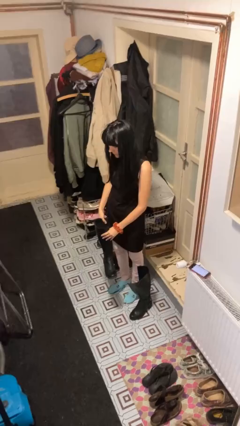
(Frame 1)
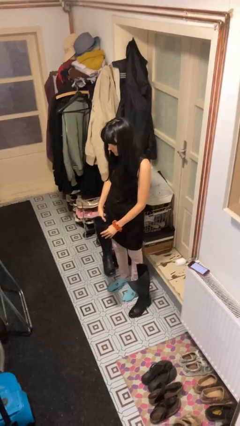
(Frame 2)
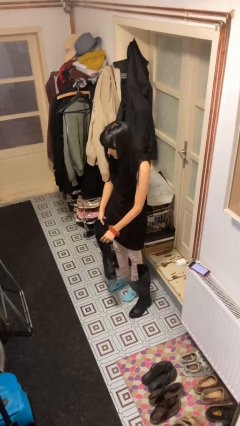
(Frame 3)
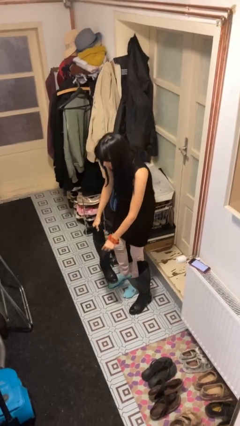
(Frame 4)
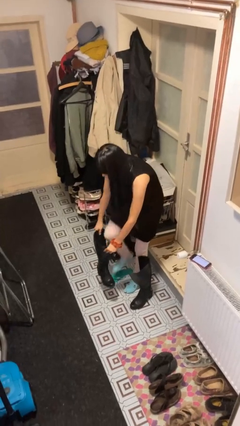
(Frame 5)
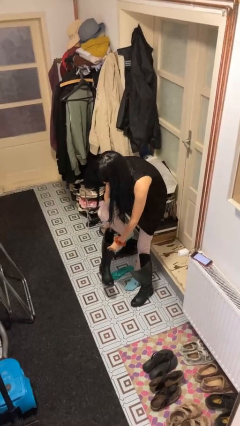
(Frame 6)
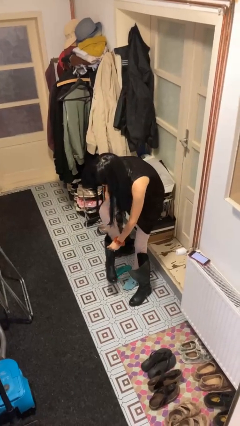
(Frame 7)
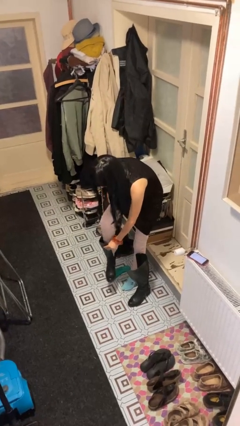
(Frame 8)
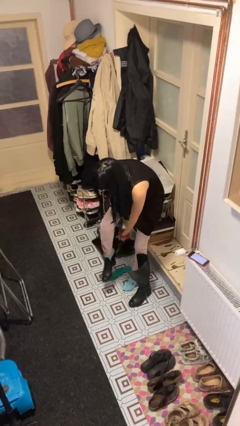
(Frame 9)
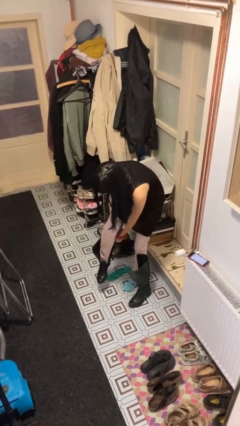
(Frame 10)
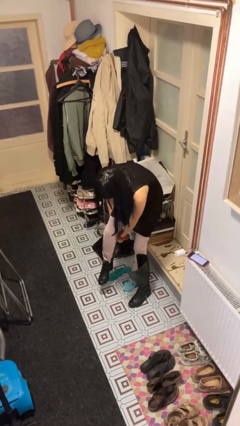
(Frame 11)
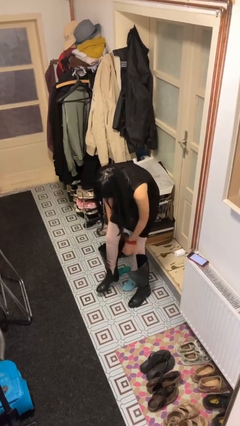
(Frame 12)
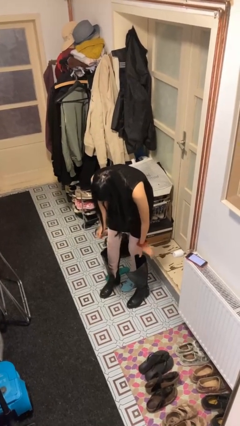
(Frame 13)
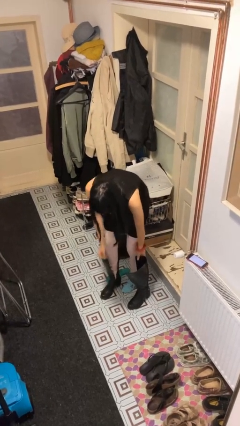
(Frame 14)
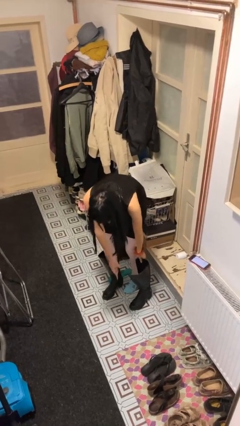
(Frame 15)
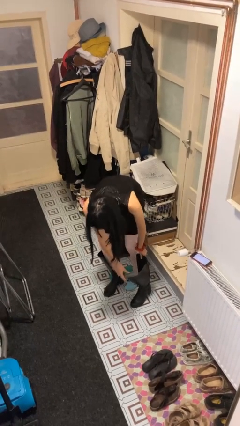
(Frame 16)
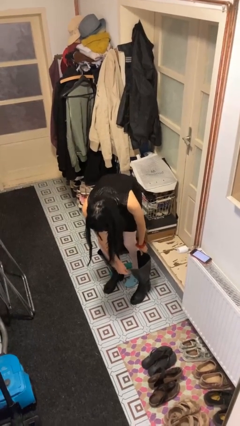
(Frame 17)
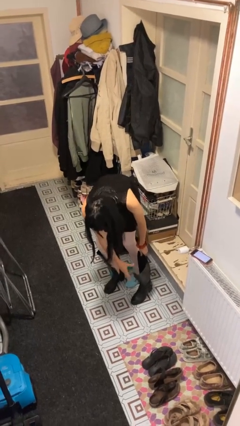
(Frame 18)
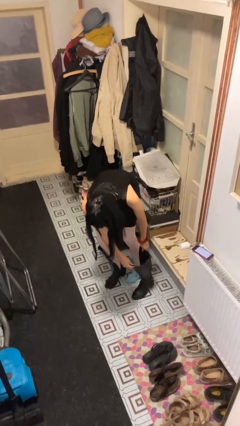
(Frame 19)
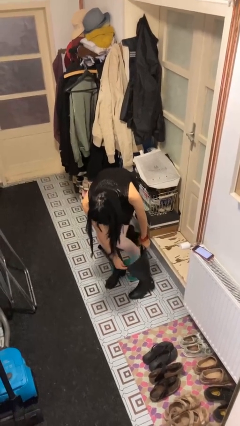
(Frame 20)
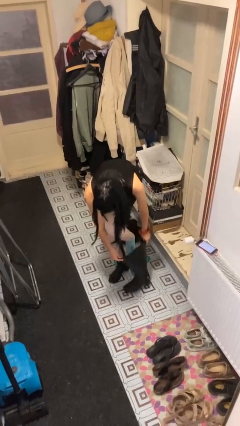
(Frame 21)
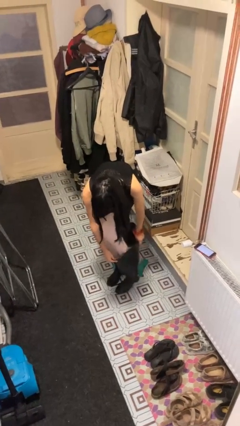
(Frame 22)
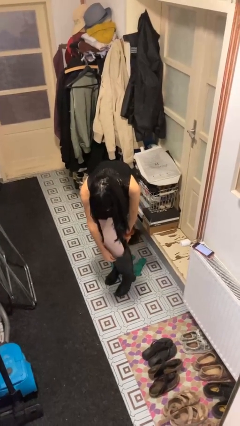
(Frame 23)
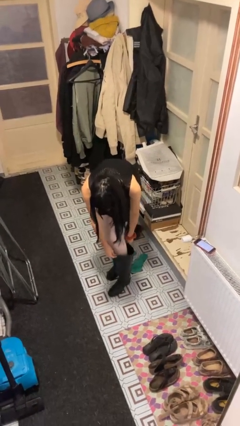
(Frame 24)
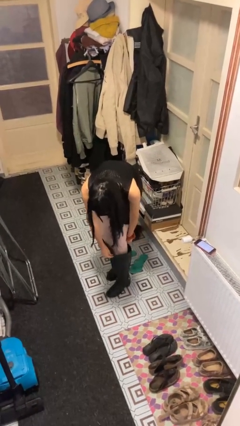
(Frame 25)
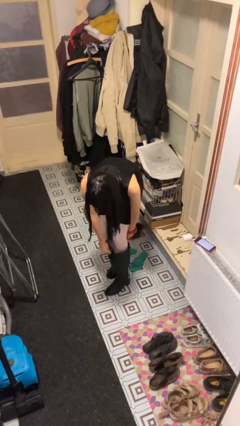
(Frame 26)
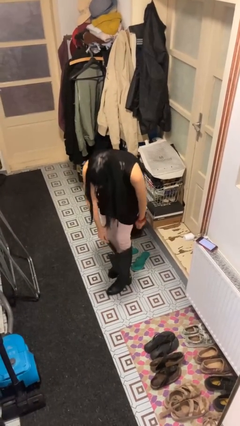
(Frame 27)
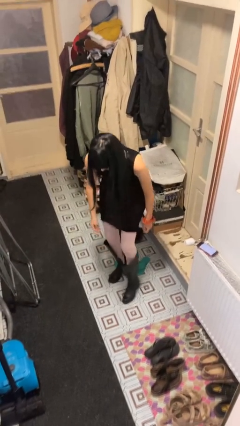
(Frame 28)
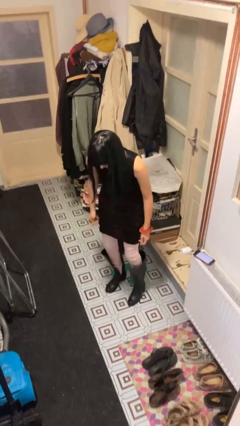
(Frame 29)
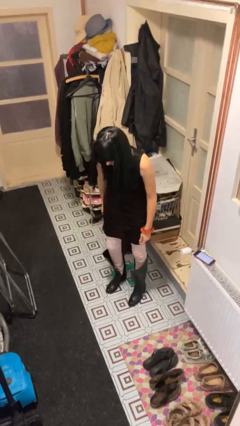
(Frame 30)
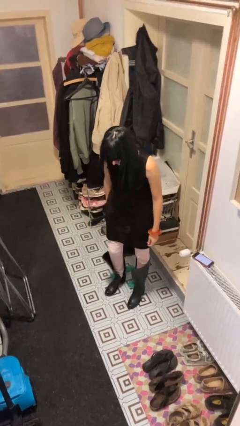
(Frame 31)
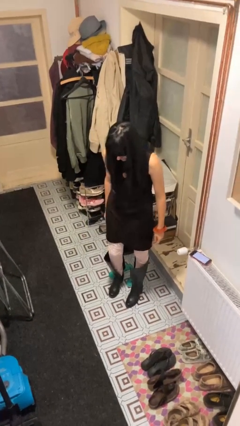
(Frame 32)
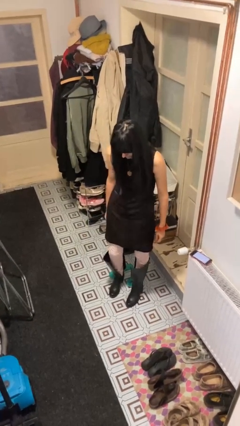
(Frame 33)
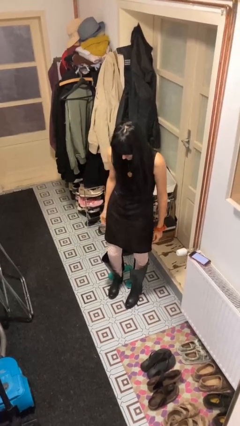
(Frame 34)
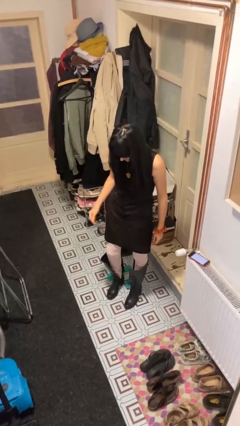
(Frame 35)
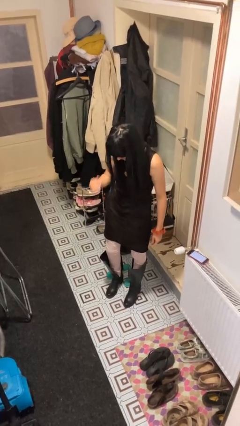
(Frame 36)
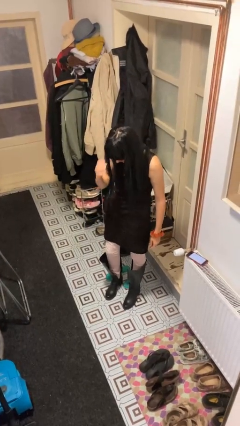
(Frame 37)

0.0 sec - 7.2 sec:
person puts on boots

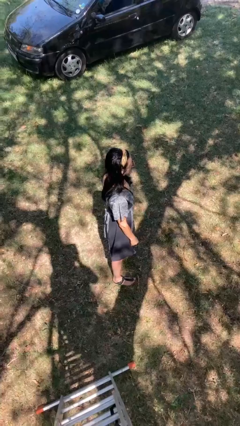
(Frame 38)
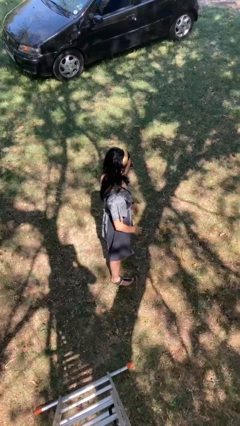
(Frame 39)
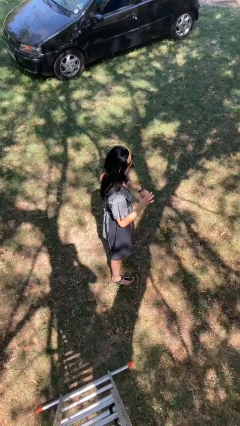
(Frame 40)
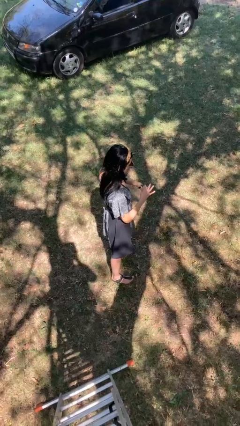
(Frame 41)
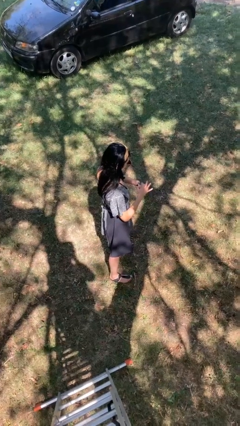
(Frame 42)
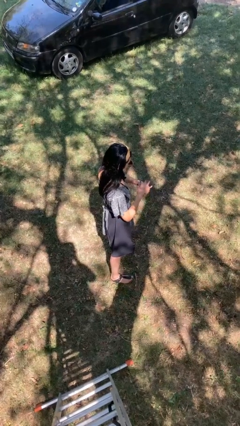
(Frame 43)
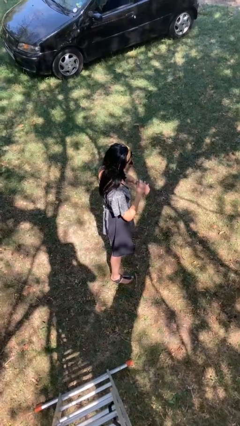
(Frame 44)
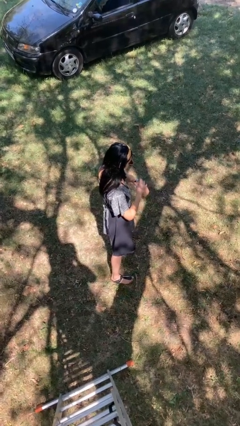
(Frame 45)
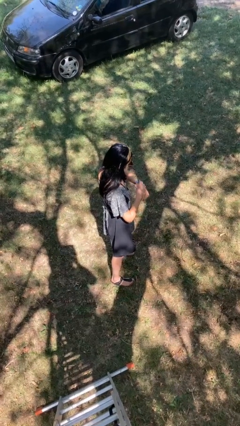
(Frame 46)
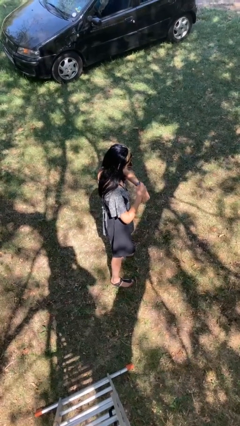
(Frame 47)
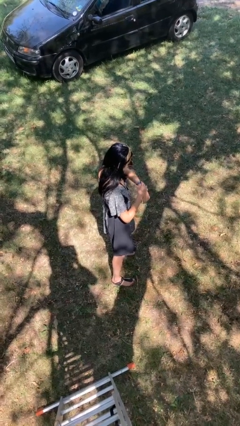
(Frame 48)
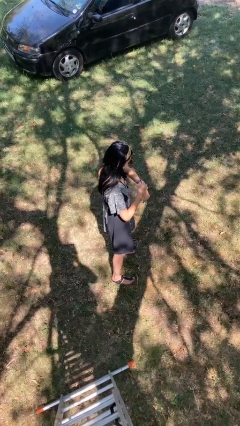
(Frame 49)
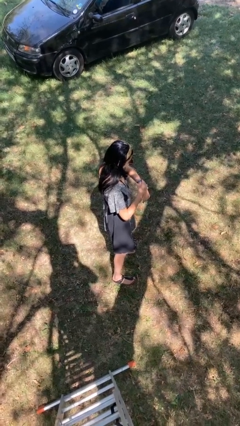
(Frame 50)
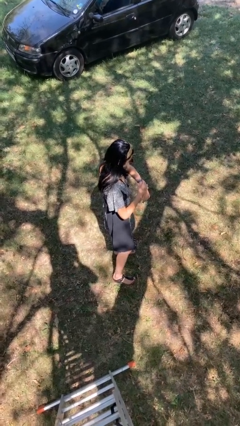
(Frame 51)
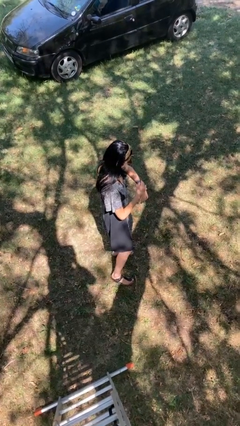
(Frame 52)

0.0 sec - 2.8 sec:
person looks at wristwatch

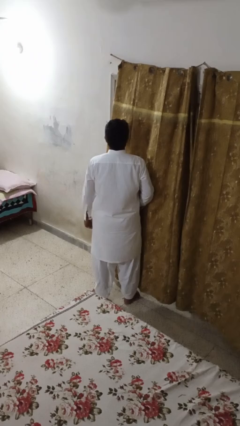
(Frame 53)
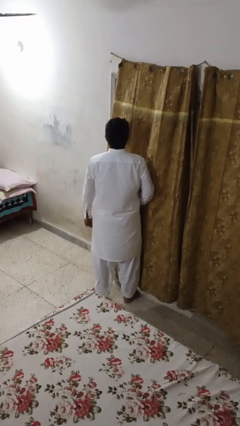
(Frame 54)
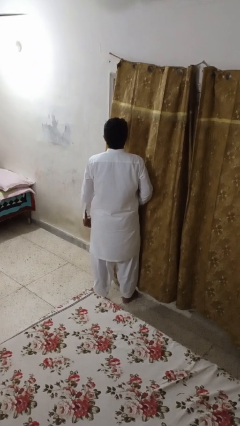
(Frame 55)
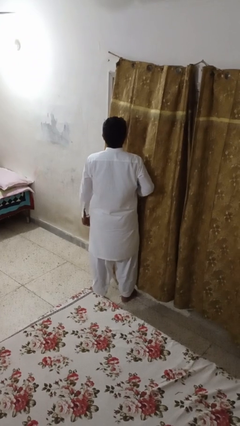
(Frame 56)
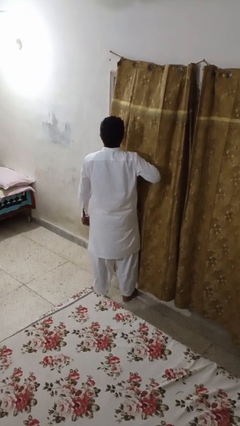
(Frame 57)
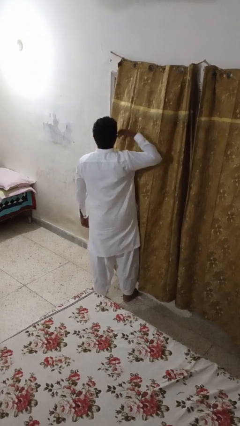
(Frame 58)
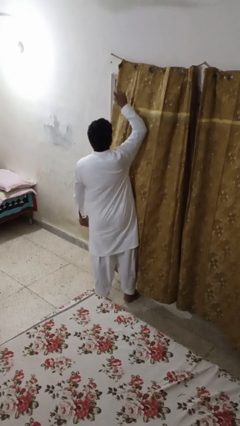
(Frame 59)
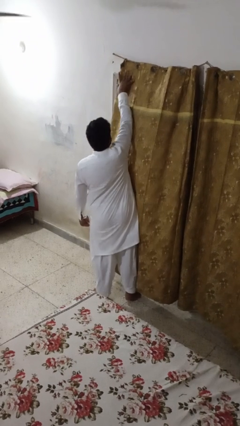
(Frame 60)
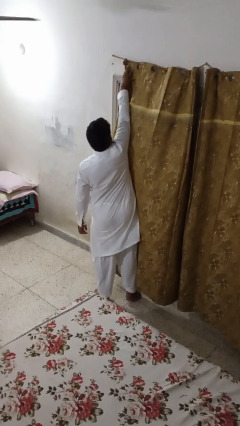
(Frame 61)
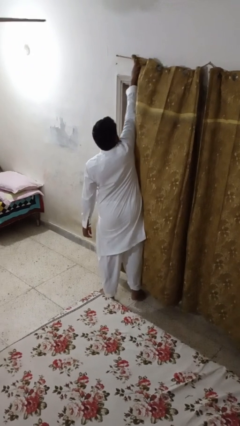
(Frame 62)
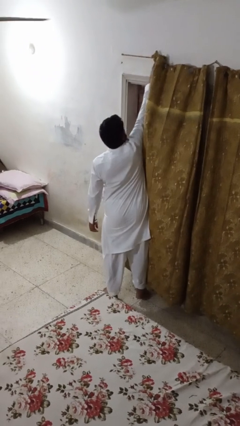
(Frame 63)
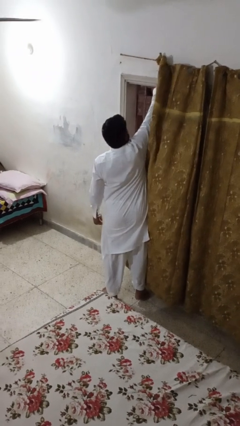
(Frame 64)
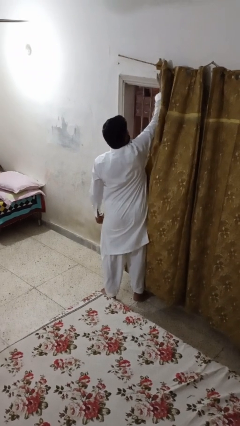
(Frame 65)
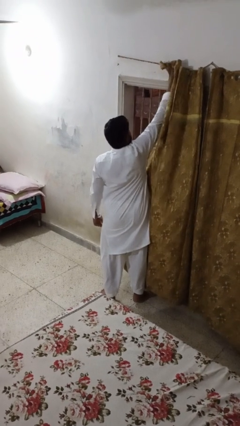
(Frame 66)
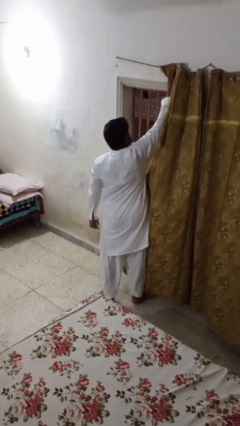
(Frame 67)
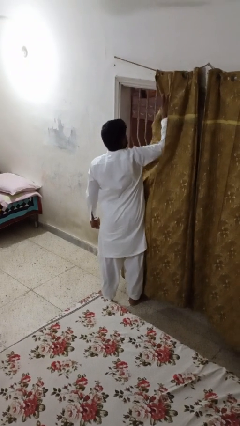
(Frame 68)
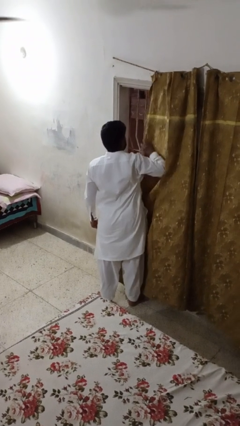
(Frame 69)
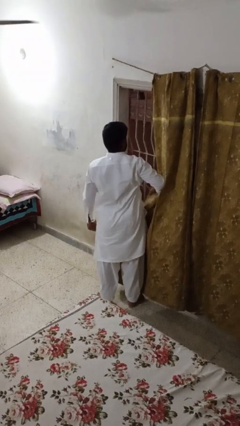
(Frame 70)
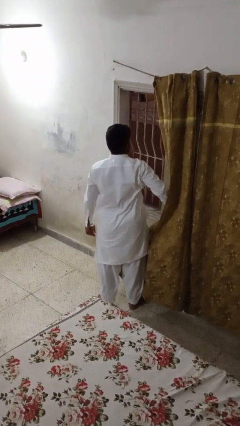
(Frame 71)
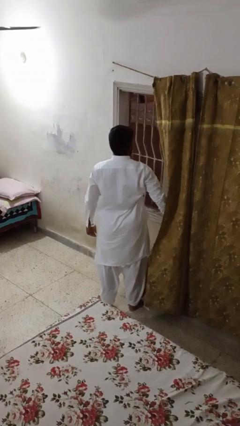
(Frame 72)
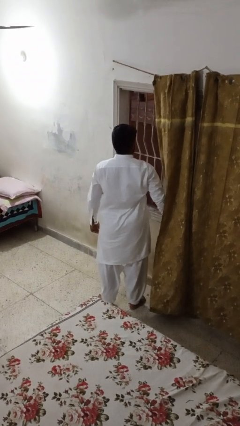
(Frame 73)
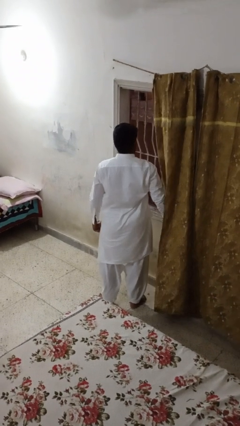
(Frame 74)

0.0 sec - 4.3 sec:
person opens curtains

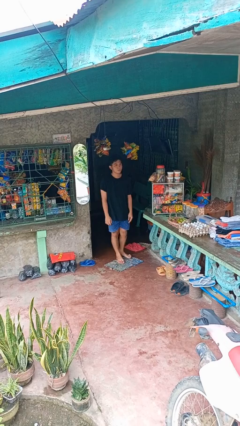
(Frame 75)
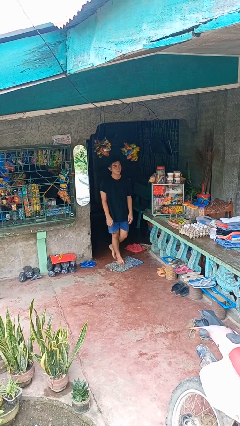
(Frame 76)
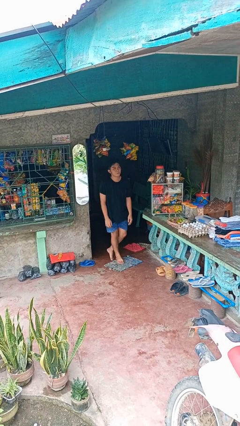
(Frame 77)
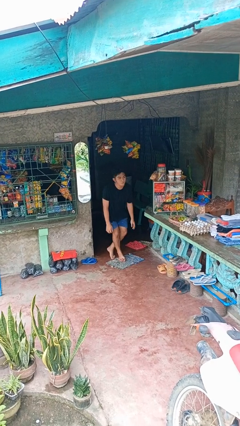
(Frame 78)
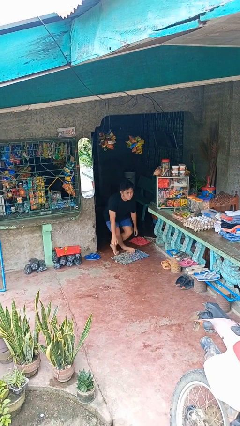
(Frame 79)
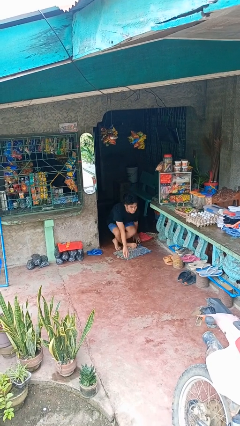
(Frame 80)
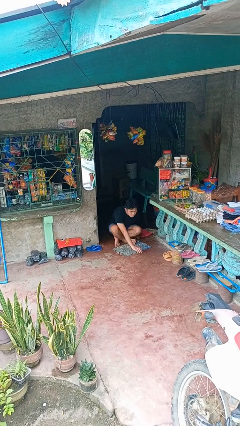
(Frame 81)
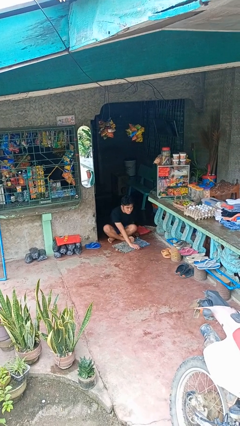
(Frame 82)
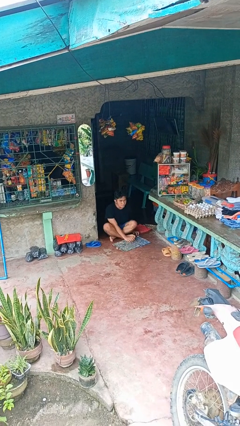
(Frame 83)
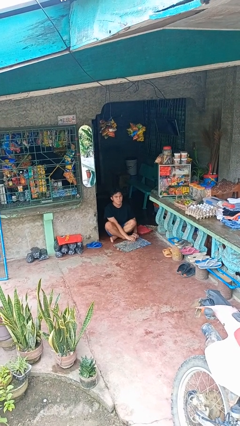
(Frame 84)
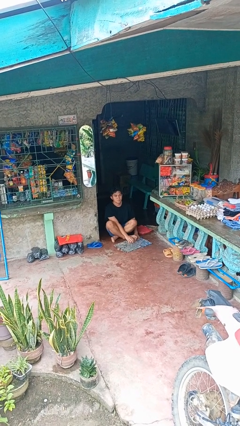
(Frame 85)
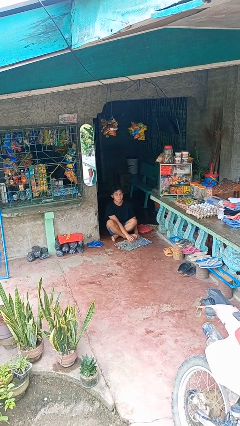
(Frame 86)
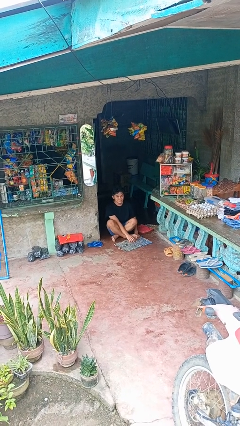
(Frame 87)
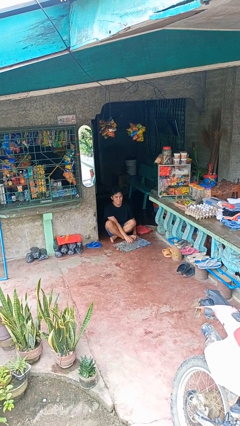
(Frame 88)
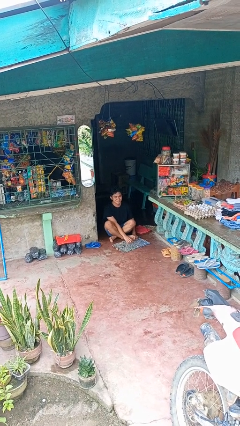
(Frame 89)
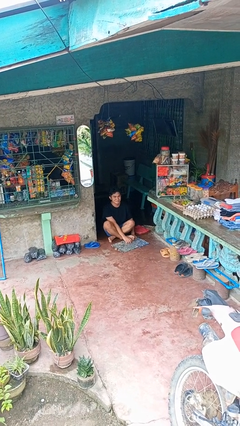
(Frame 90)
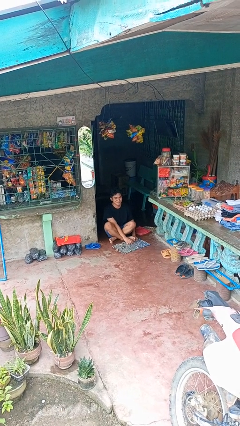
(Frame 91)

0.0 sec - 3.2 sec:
person sits crisscross

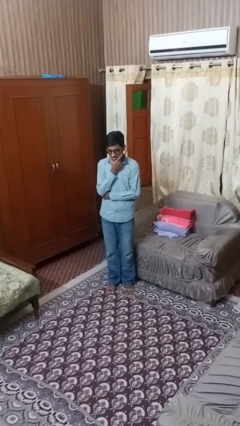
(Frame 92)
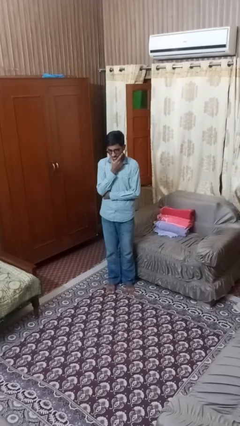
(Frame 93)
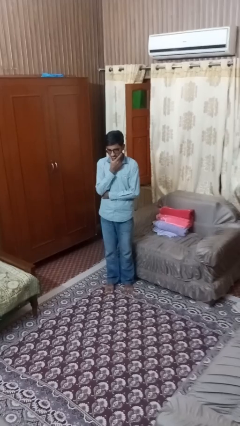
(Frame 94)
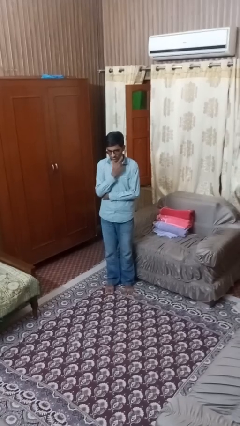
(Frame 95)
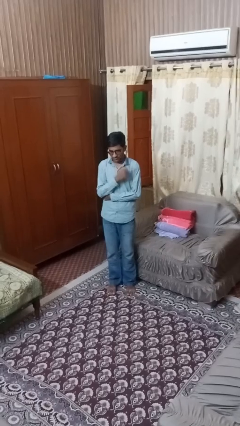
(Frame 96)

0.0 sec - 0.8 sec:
person strokes chin
